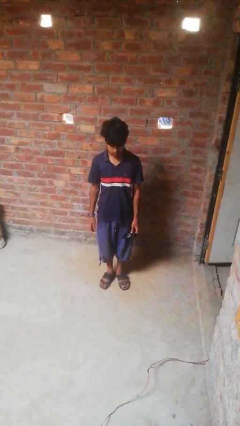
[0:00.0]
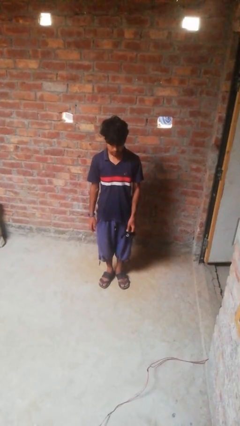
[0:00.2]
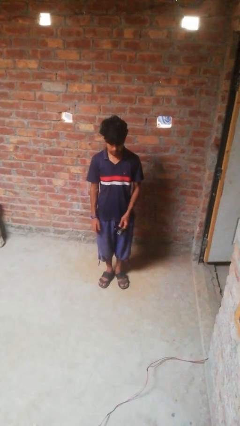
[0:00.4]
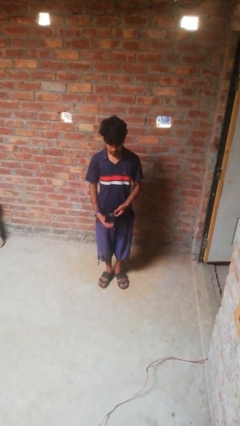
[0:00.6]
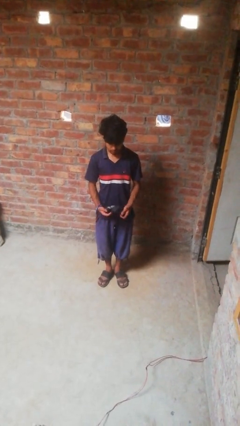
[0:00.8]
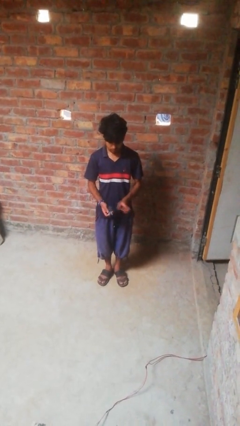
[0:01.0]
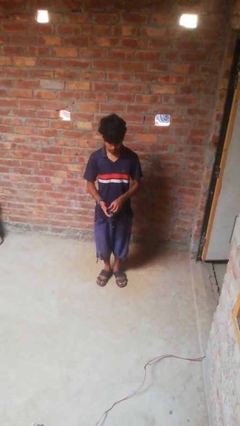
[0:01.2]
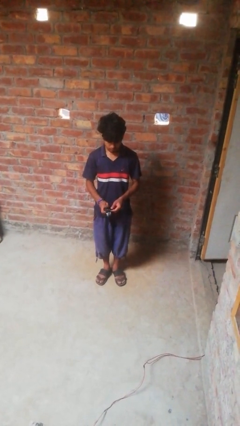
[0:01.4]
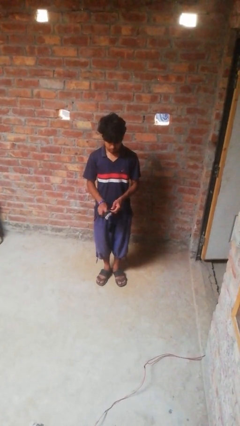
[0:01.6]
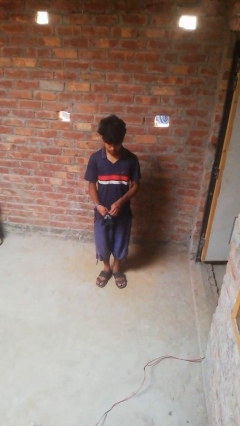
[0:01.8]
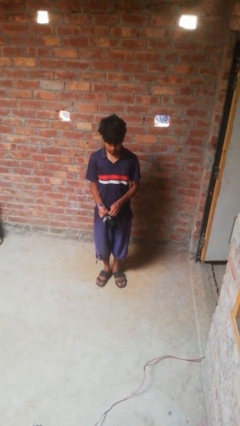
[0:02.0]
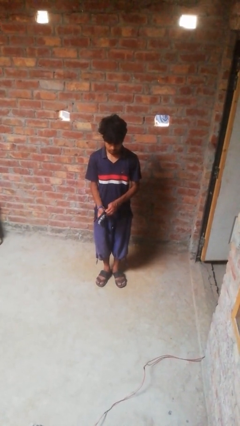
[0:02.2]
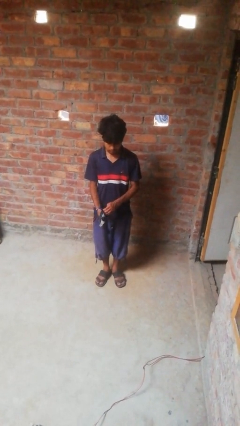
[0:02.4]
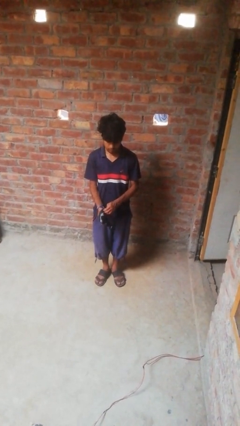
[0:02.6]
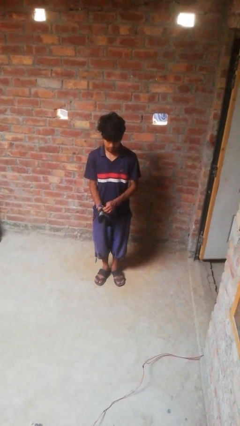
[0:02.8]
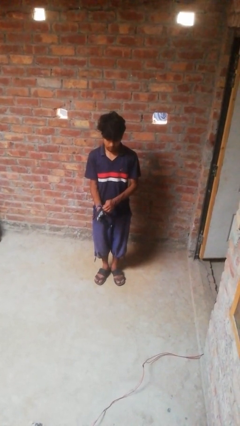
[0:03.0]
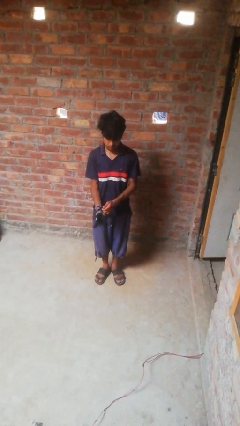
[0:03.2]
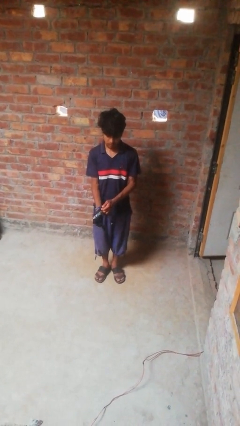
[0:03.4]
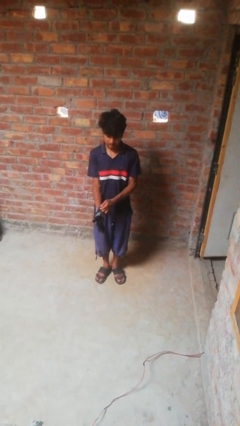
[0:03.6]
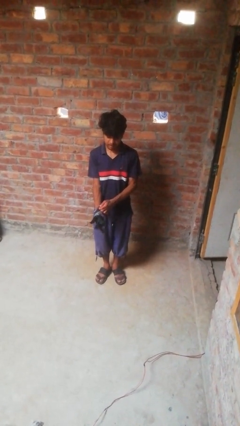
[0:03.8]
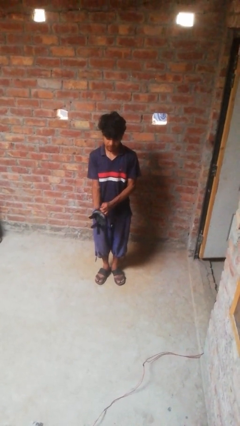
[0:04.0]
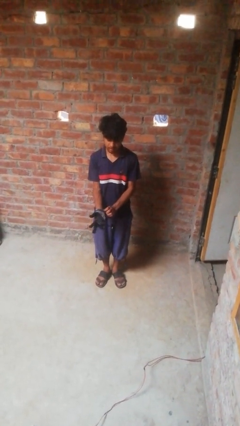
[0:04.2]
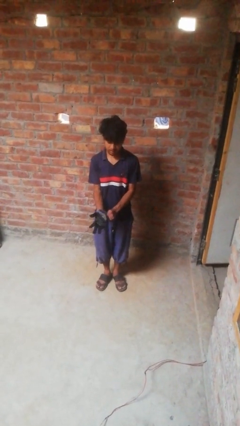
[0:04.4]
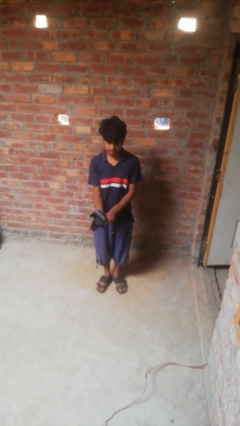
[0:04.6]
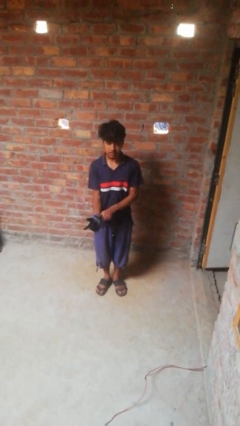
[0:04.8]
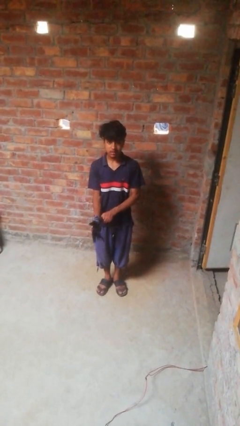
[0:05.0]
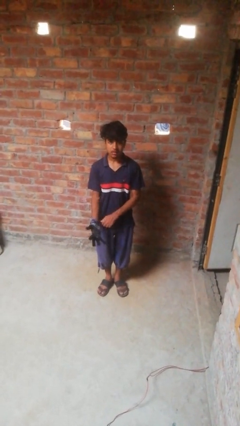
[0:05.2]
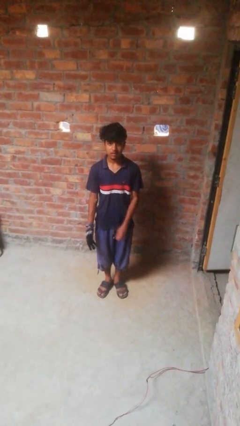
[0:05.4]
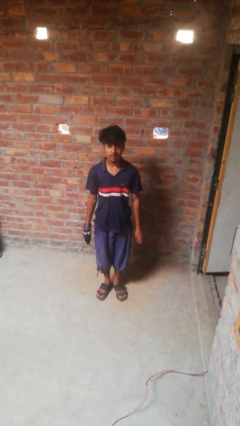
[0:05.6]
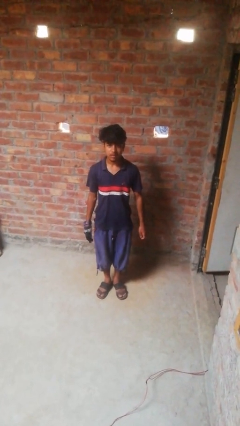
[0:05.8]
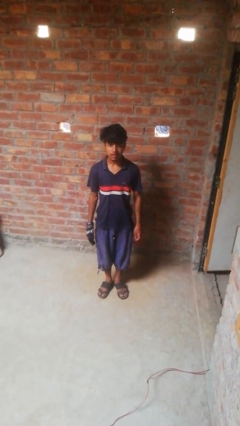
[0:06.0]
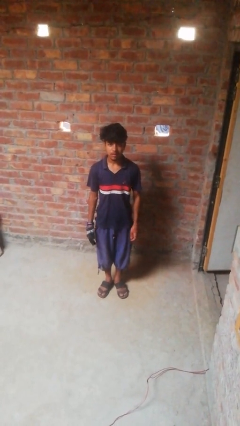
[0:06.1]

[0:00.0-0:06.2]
person puts on gloves

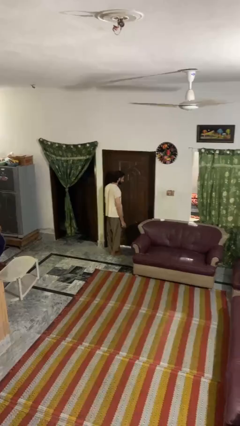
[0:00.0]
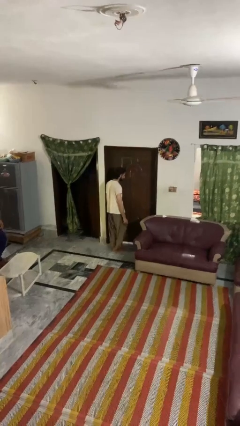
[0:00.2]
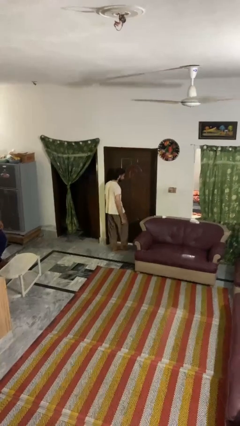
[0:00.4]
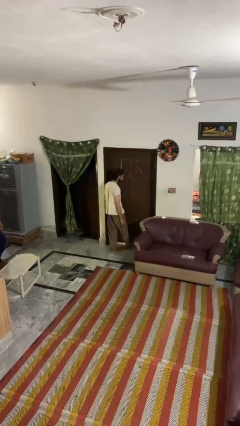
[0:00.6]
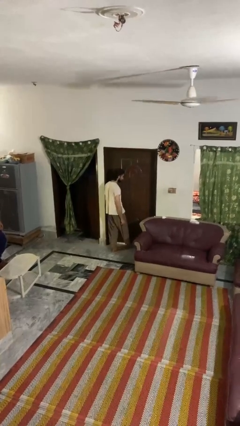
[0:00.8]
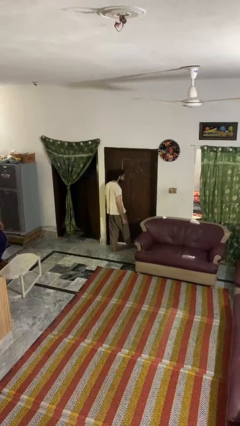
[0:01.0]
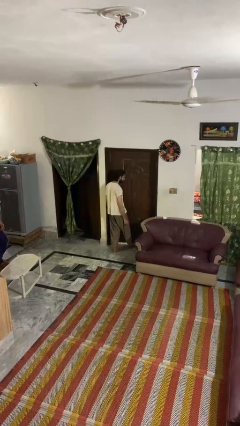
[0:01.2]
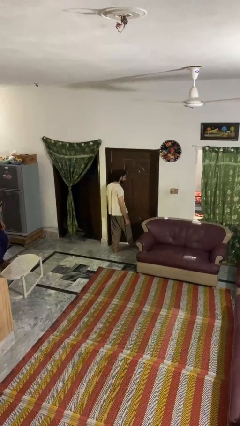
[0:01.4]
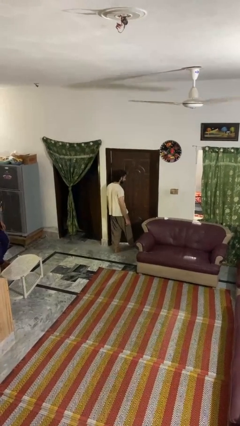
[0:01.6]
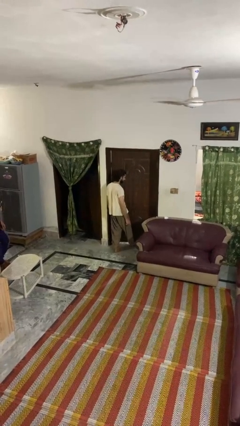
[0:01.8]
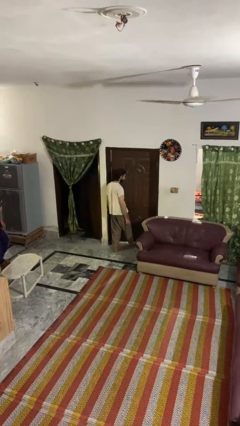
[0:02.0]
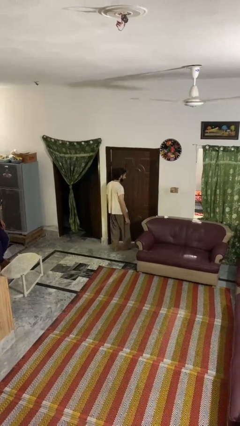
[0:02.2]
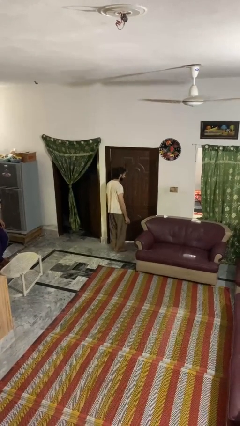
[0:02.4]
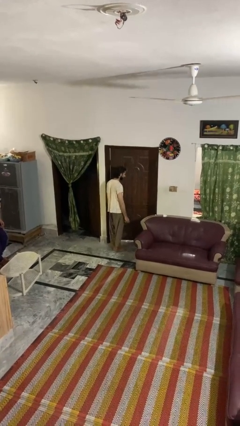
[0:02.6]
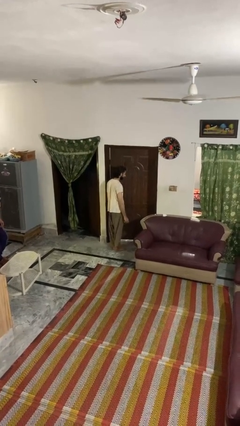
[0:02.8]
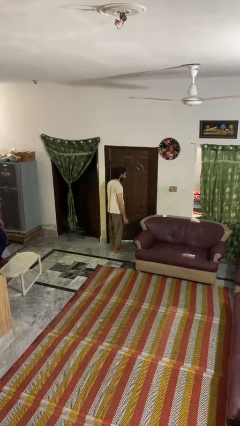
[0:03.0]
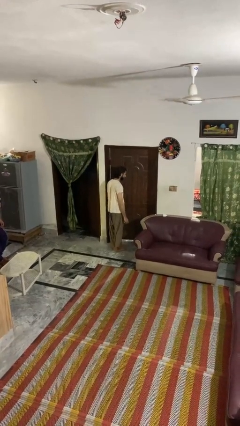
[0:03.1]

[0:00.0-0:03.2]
person opens facility door

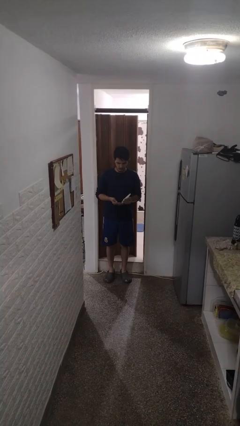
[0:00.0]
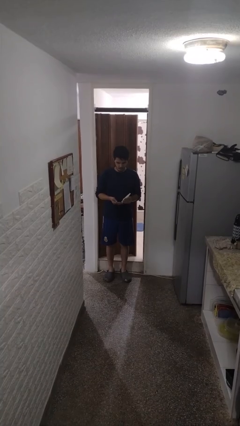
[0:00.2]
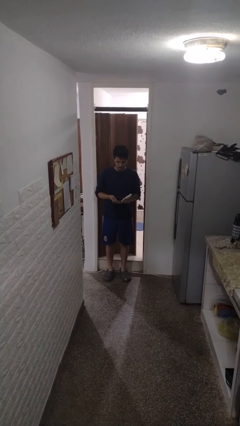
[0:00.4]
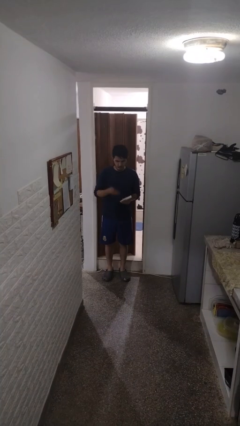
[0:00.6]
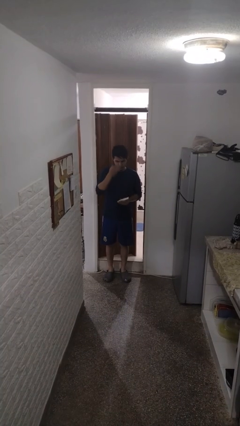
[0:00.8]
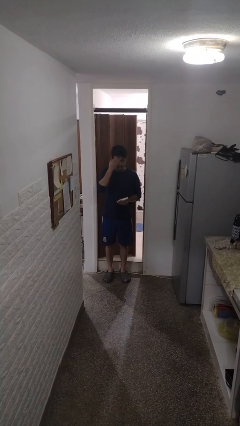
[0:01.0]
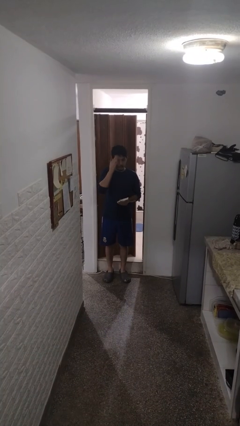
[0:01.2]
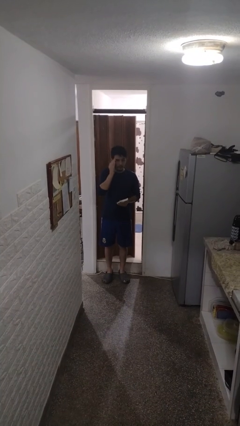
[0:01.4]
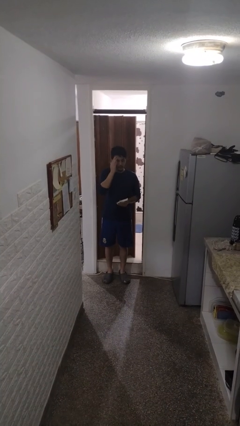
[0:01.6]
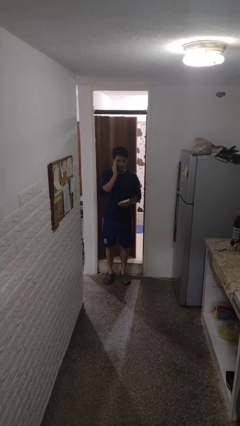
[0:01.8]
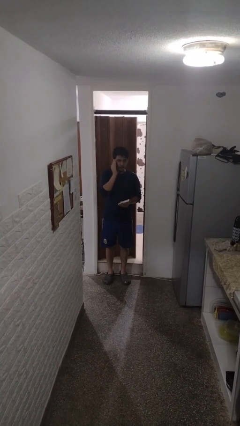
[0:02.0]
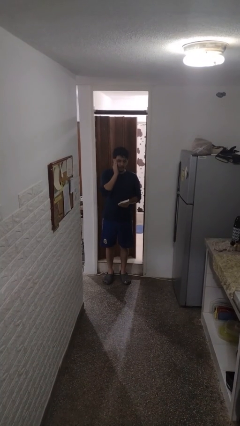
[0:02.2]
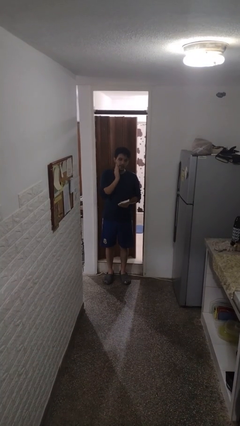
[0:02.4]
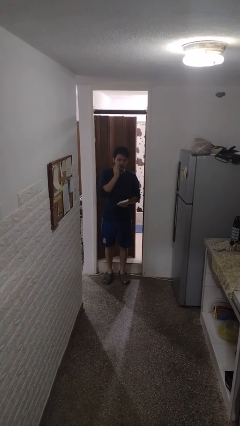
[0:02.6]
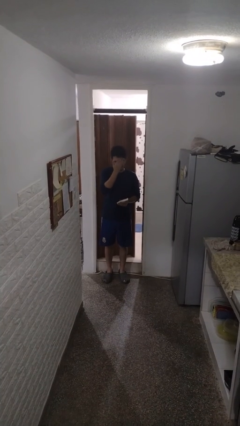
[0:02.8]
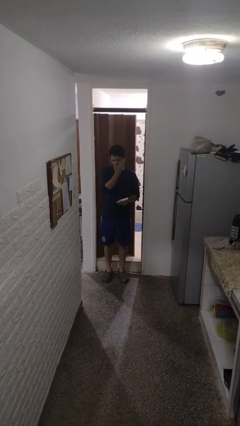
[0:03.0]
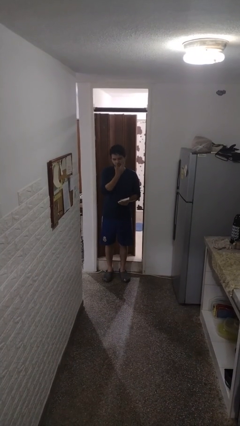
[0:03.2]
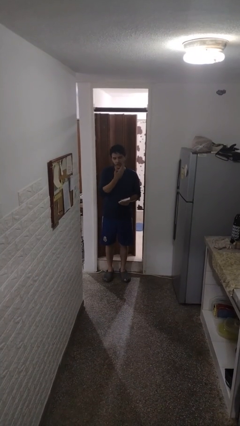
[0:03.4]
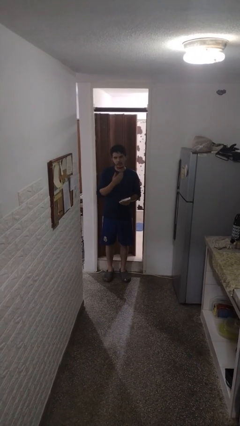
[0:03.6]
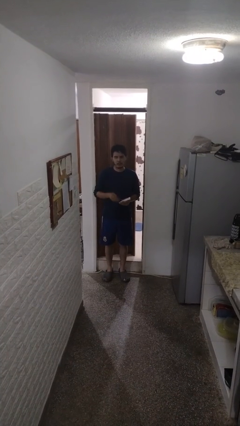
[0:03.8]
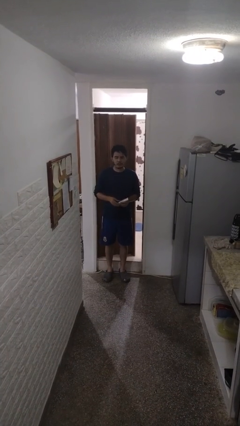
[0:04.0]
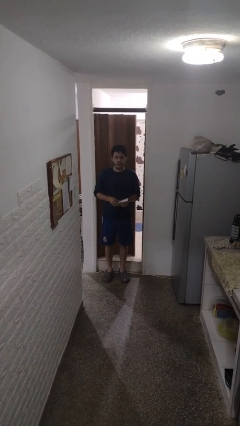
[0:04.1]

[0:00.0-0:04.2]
person applies facial moisturizer

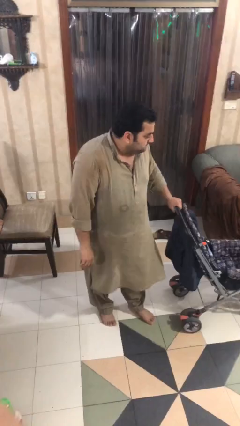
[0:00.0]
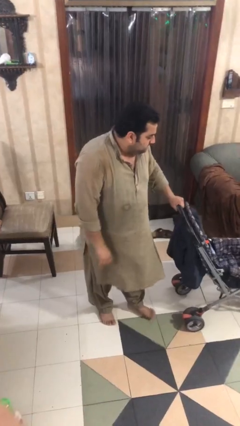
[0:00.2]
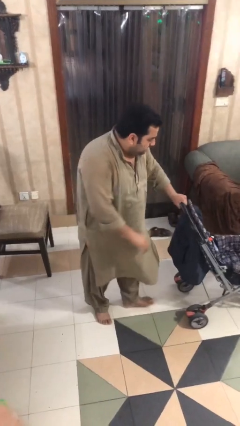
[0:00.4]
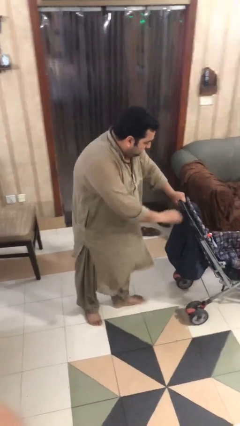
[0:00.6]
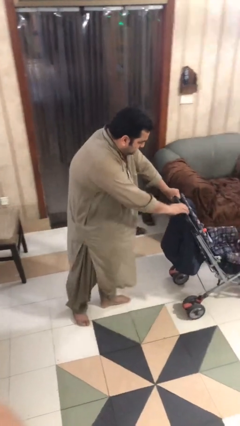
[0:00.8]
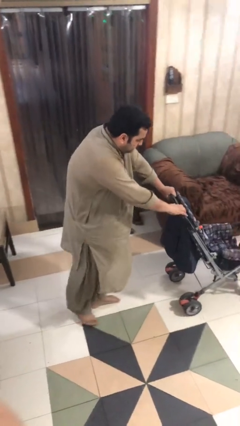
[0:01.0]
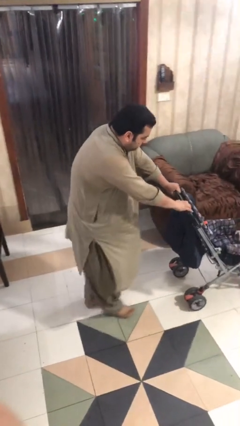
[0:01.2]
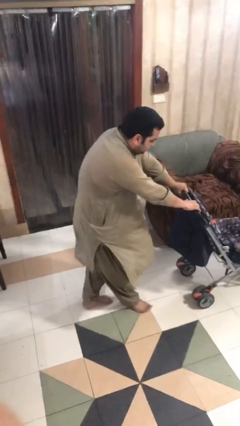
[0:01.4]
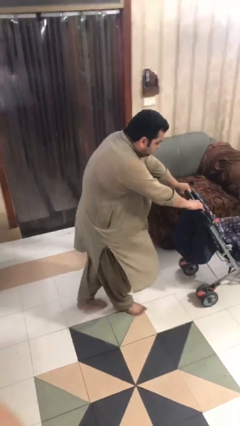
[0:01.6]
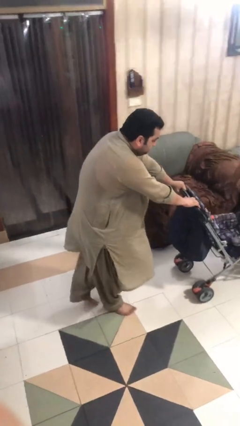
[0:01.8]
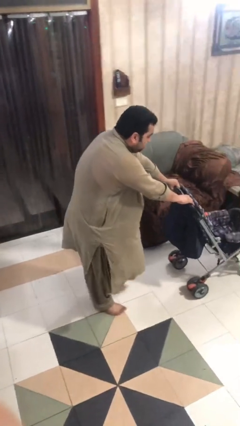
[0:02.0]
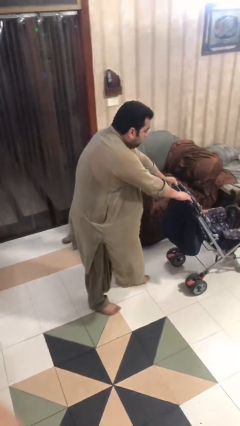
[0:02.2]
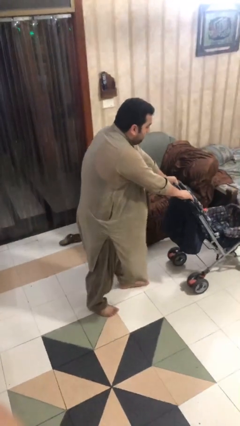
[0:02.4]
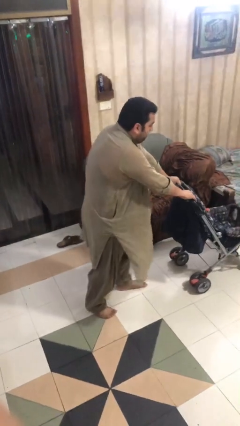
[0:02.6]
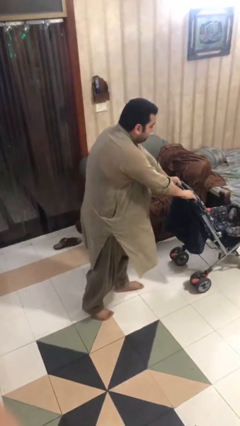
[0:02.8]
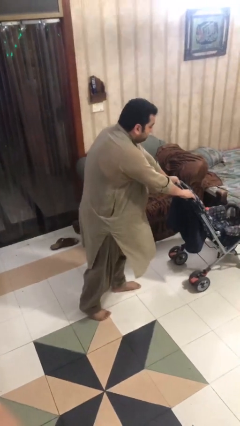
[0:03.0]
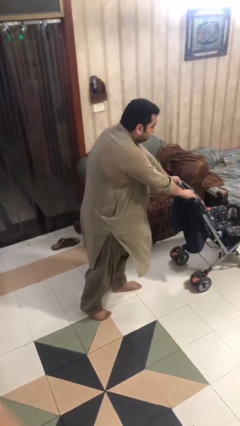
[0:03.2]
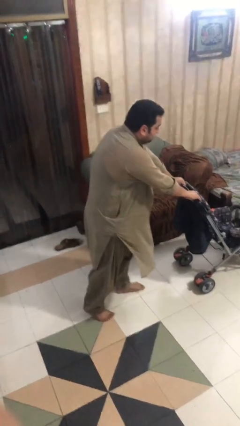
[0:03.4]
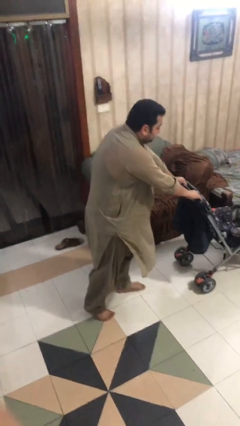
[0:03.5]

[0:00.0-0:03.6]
person pushes wheeled cart

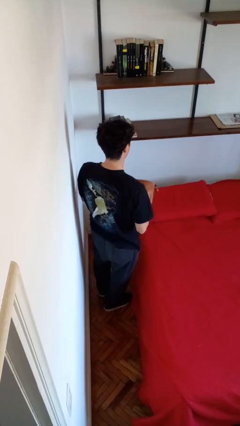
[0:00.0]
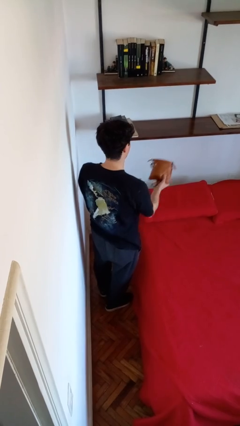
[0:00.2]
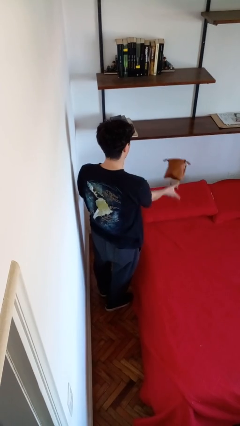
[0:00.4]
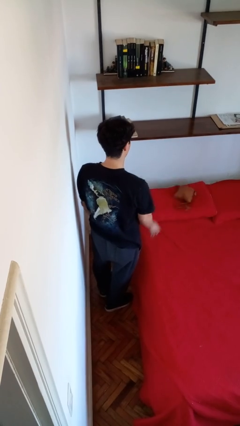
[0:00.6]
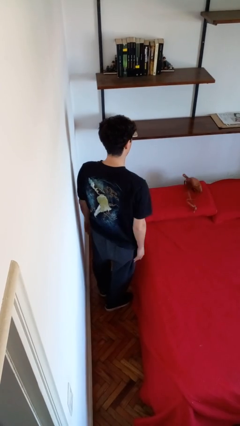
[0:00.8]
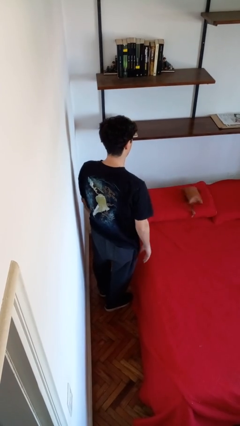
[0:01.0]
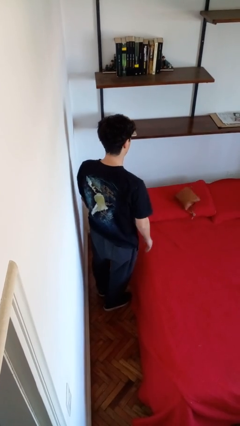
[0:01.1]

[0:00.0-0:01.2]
person throws object on bed
